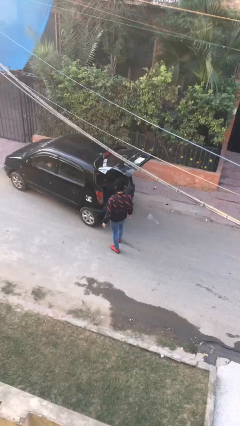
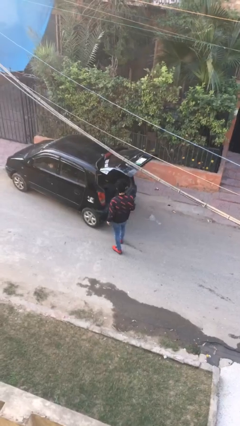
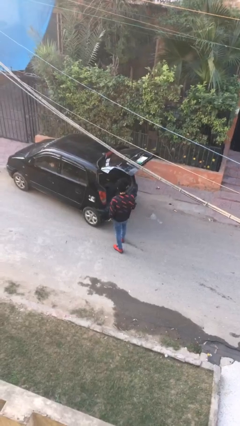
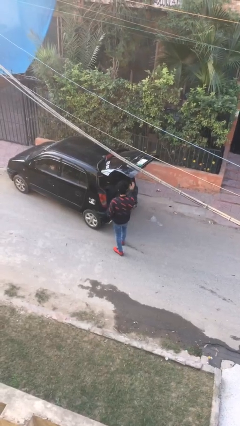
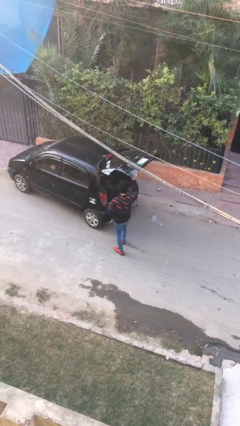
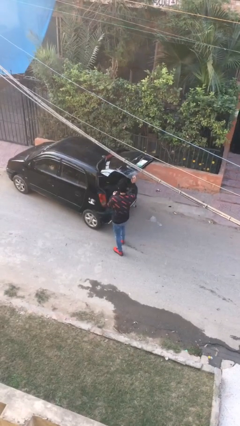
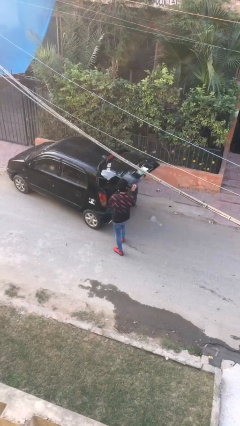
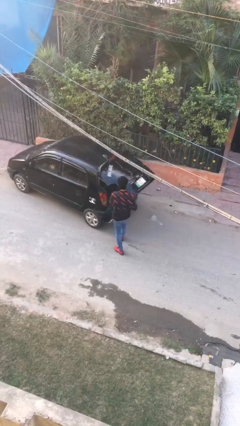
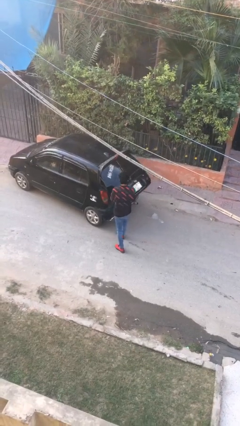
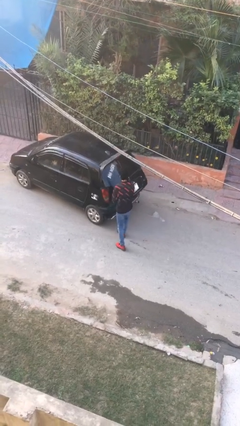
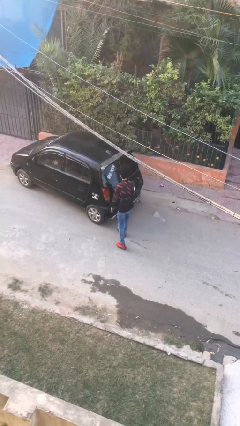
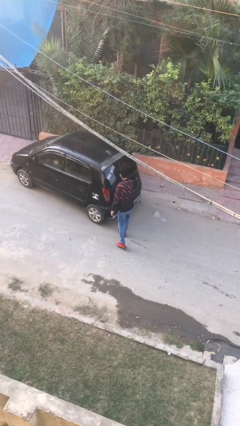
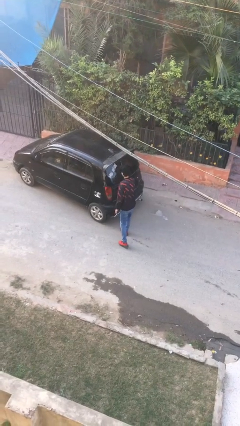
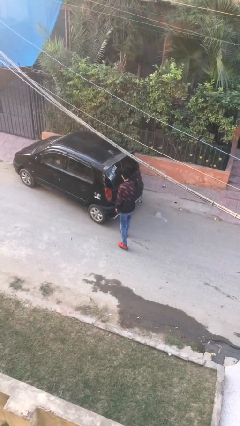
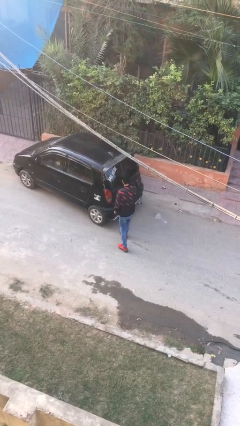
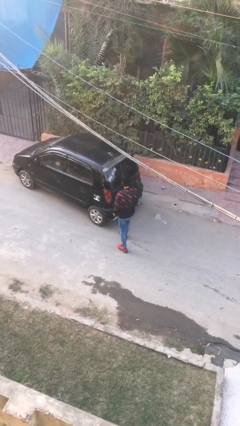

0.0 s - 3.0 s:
person closes car trunk

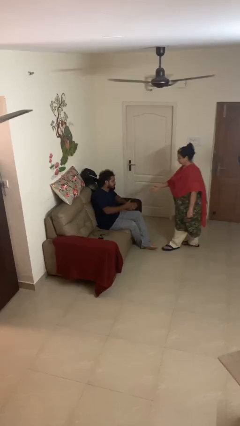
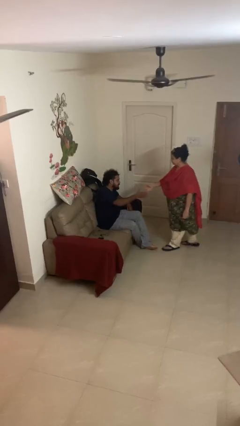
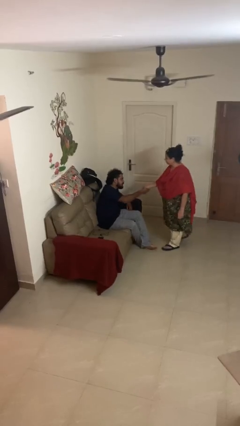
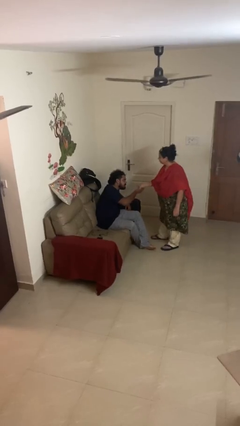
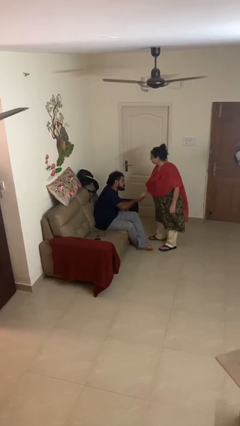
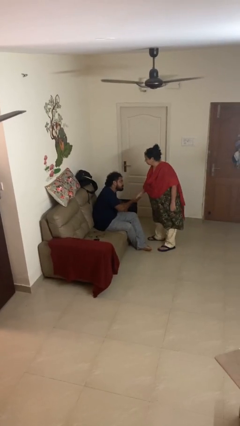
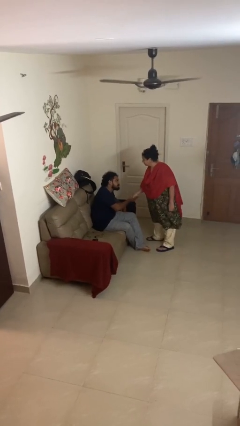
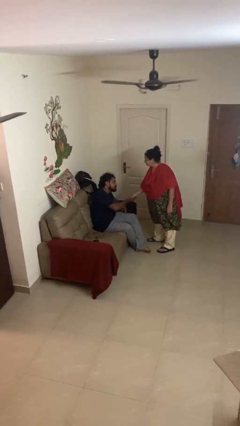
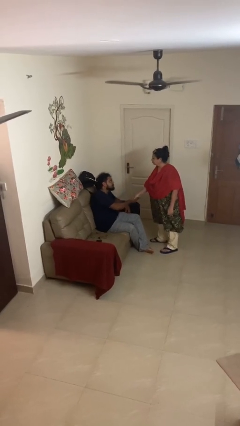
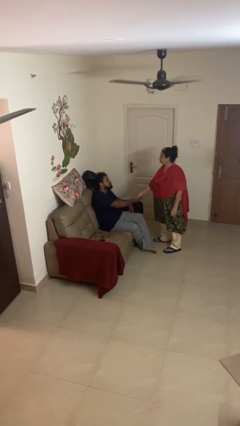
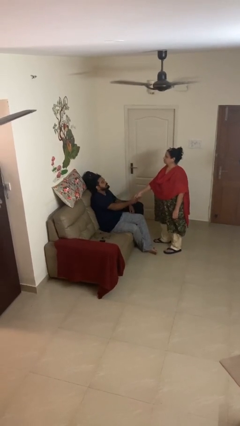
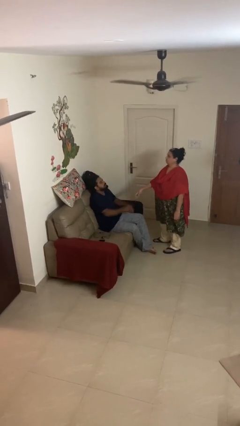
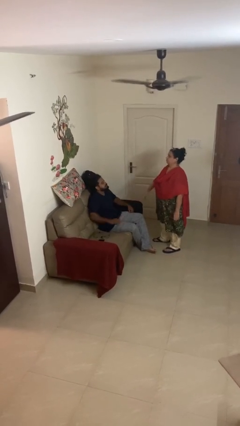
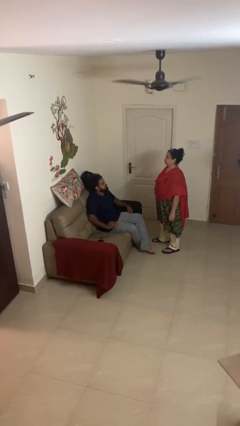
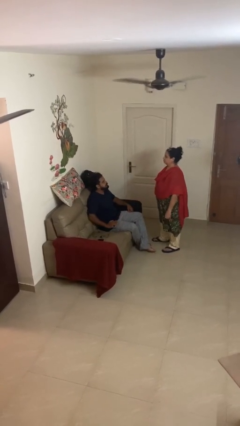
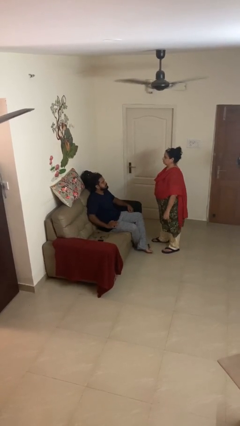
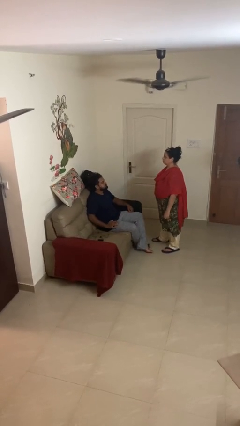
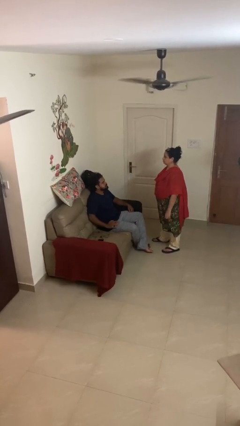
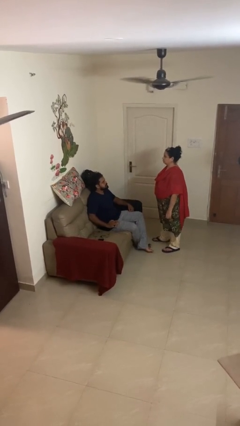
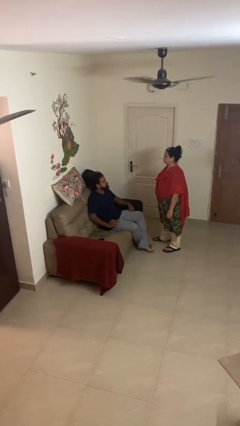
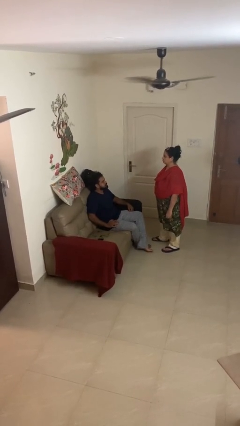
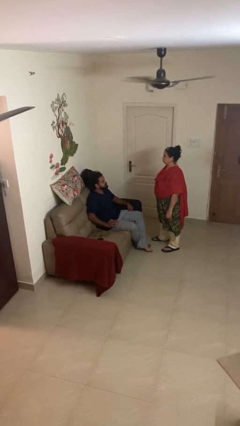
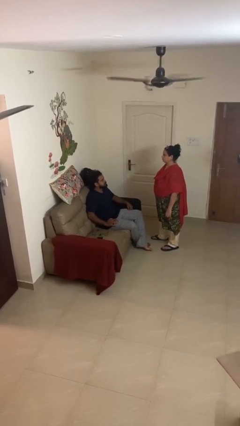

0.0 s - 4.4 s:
person shakes hand

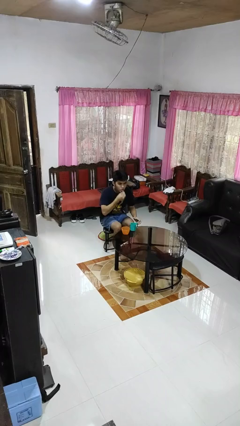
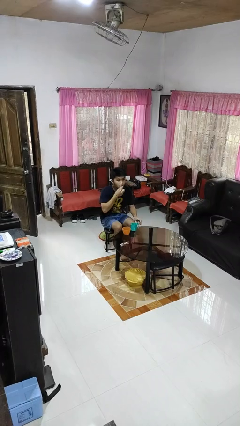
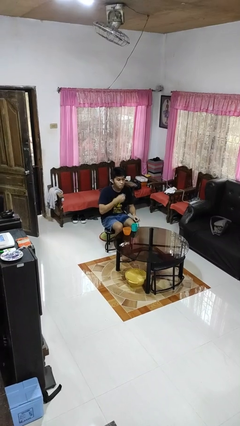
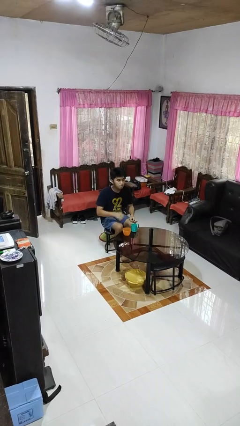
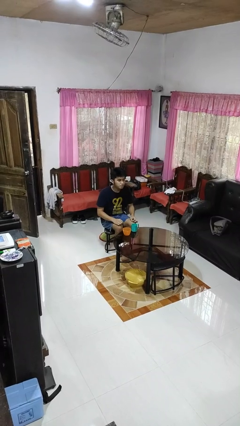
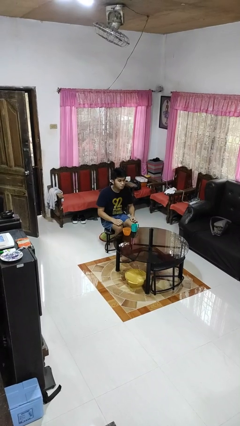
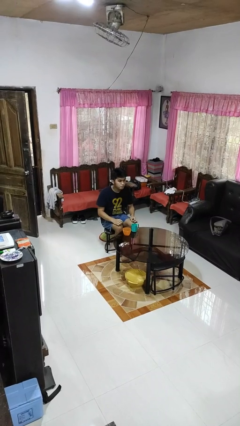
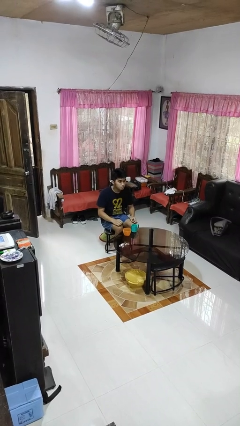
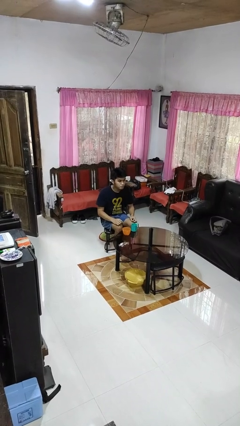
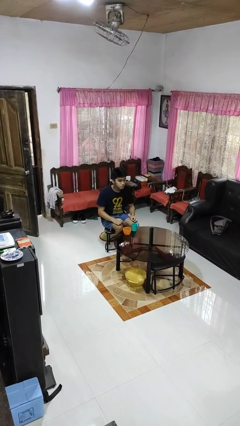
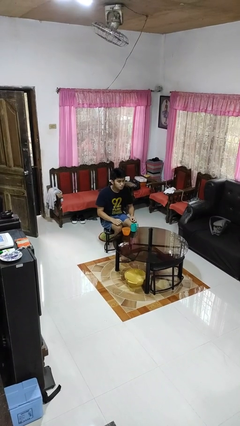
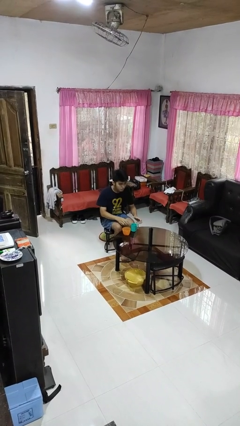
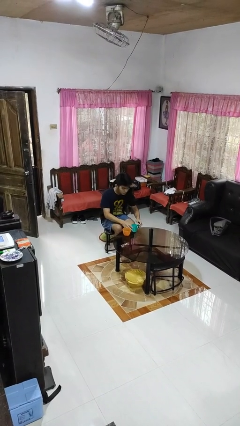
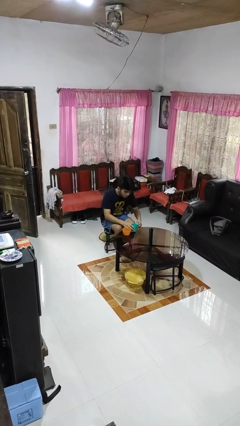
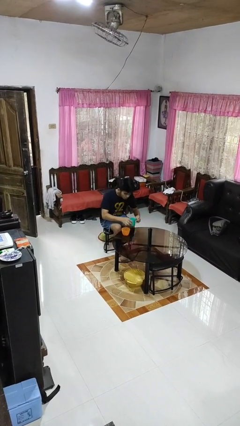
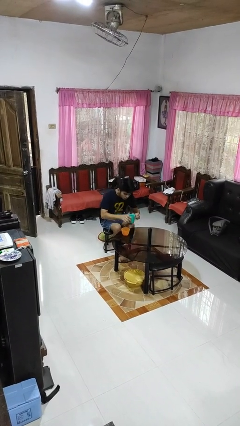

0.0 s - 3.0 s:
person takes medicine pills

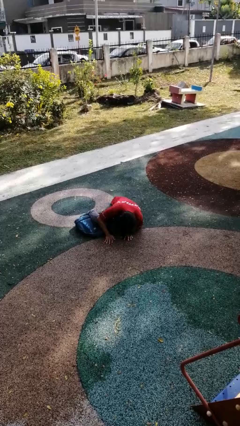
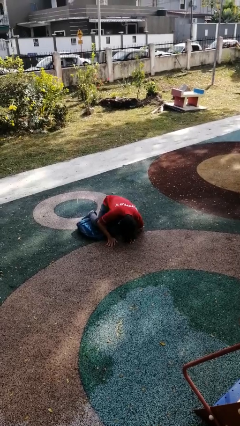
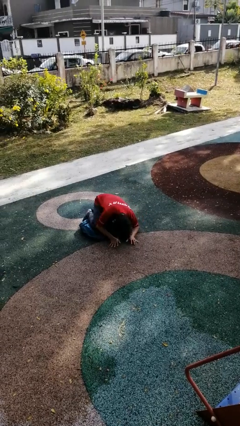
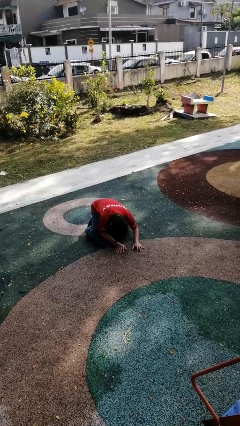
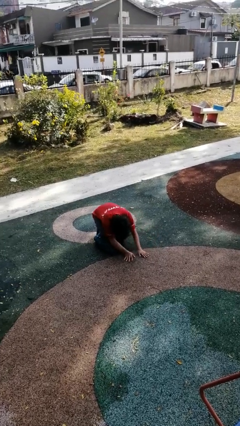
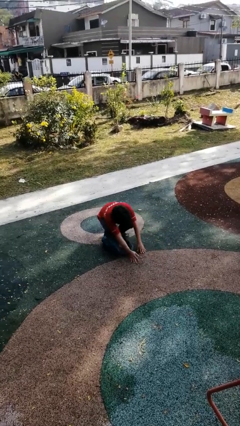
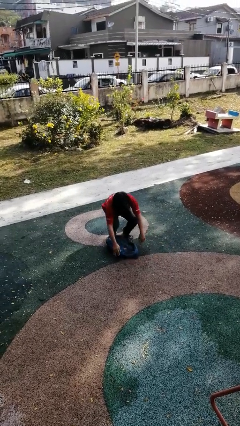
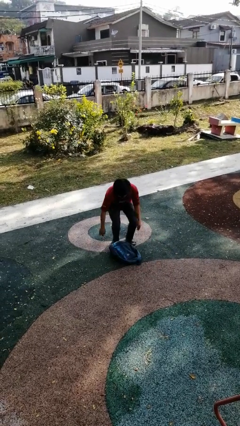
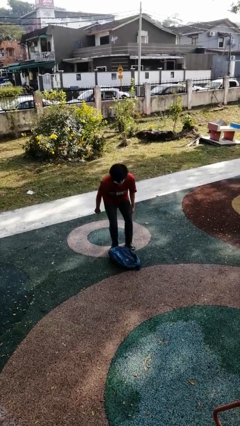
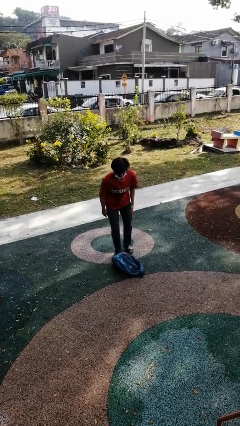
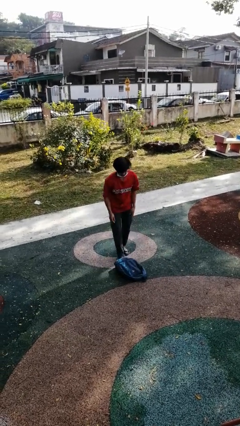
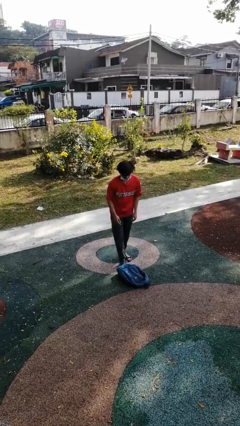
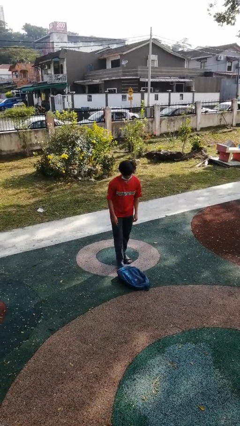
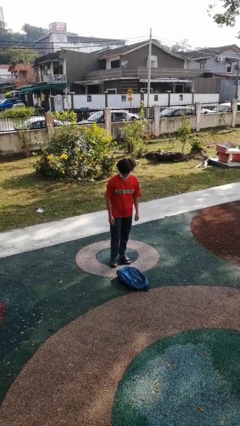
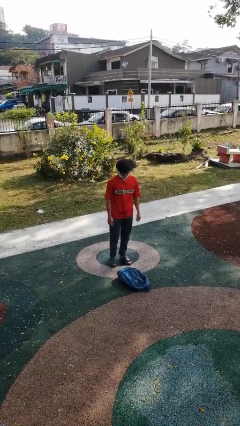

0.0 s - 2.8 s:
person stands up from floor

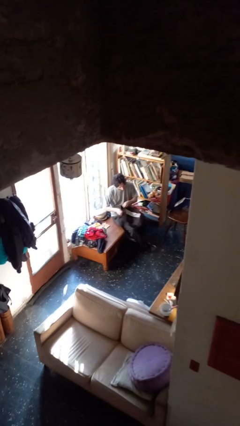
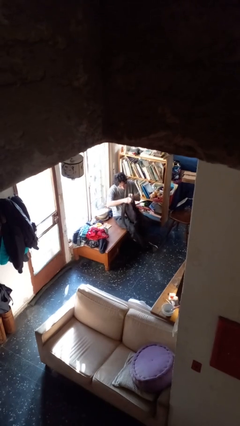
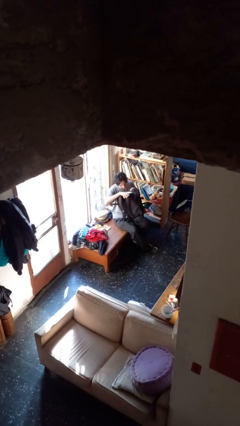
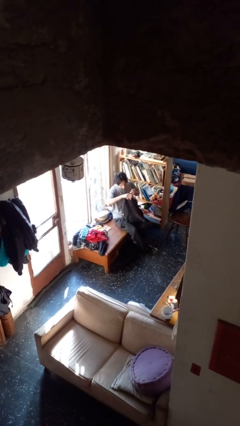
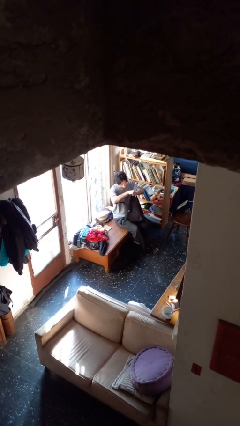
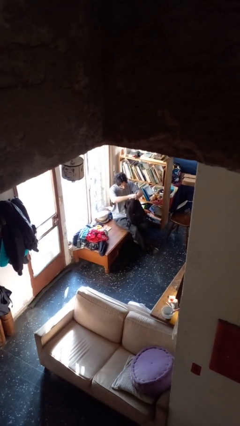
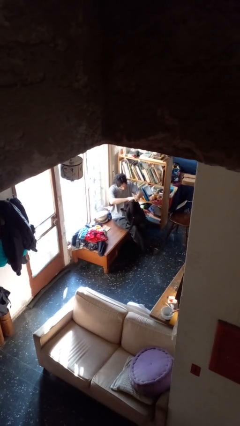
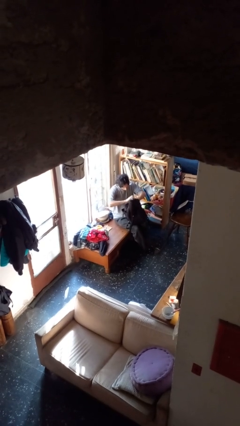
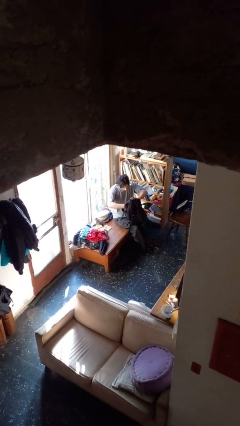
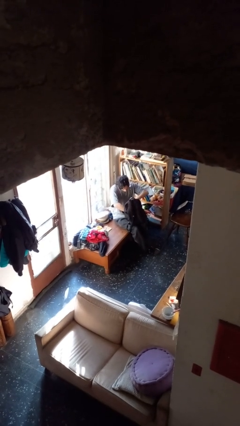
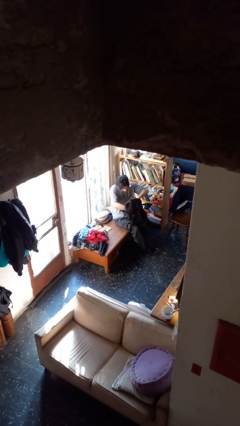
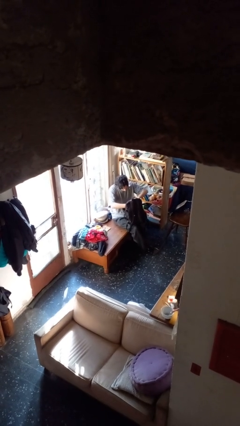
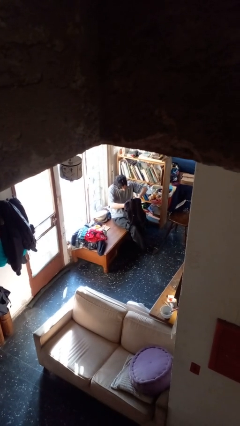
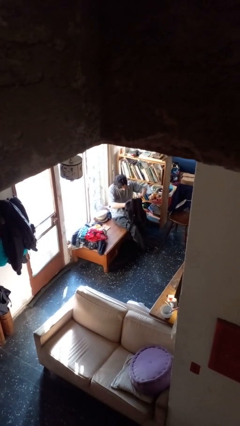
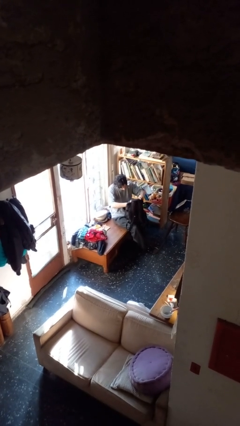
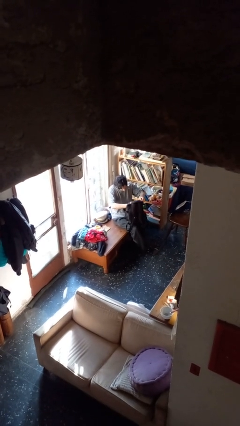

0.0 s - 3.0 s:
person searches in backpack

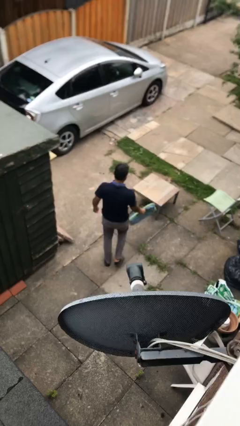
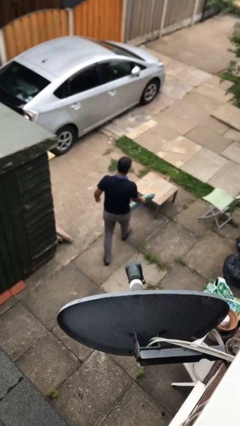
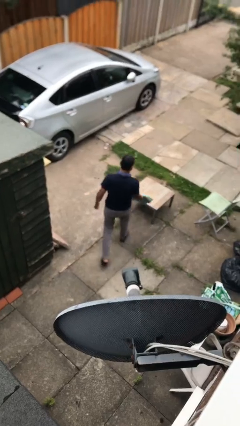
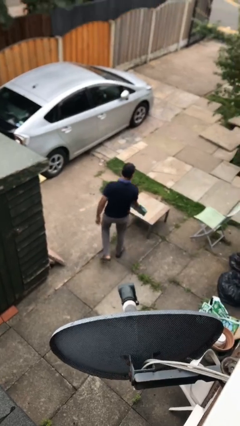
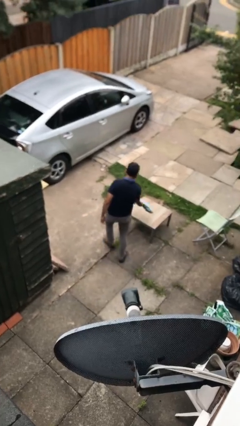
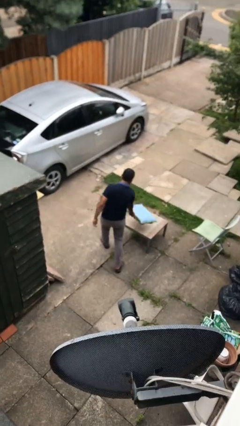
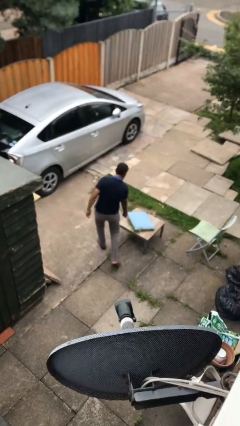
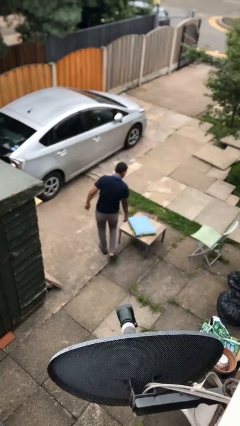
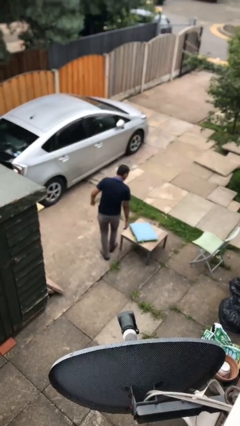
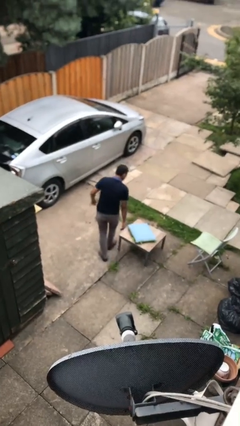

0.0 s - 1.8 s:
person puts down object on table
